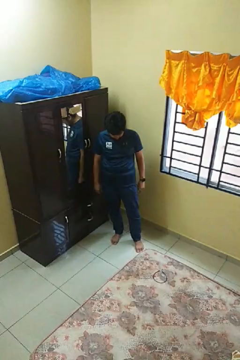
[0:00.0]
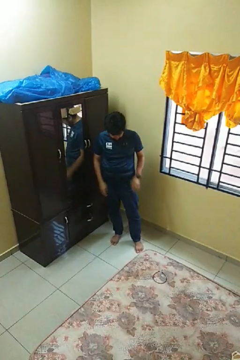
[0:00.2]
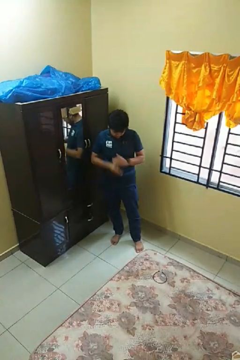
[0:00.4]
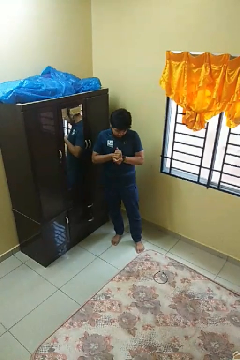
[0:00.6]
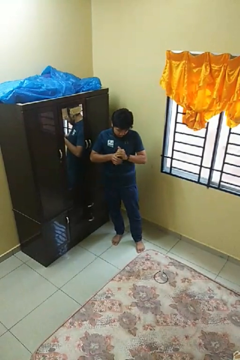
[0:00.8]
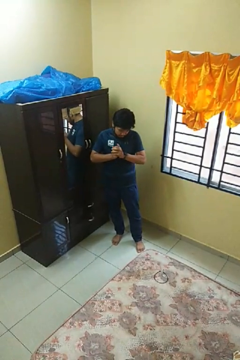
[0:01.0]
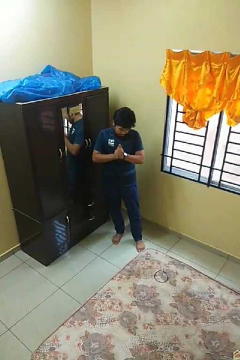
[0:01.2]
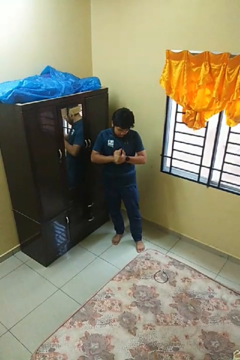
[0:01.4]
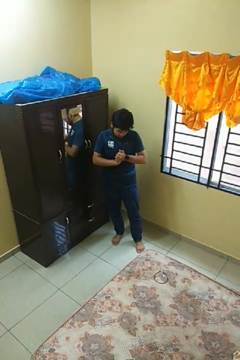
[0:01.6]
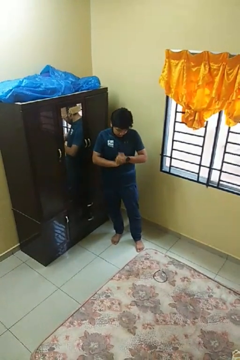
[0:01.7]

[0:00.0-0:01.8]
person cracks knuckles

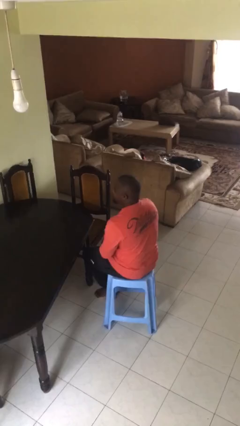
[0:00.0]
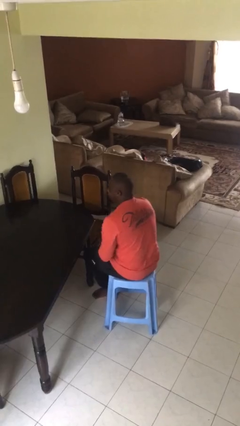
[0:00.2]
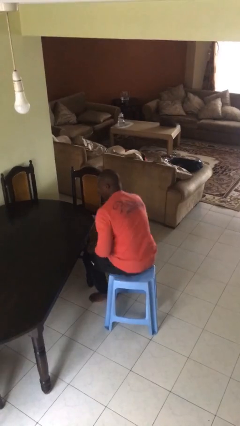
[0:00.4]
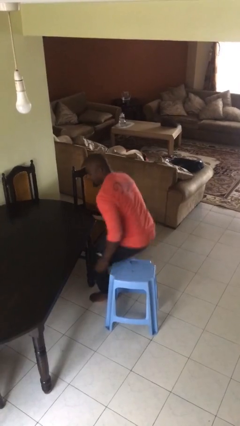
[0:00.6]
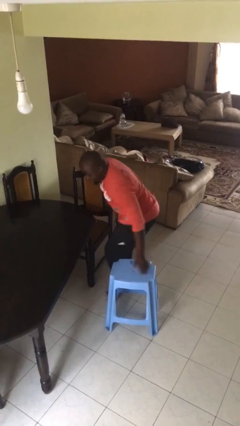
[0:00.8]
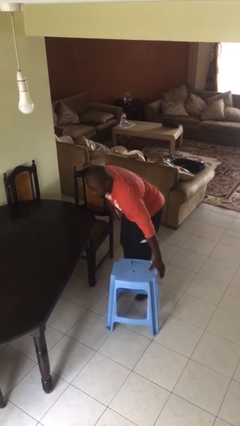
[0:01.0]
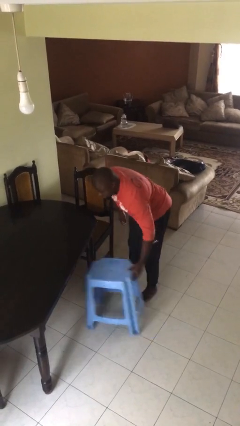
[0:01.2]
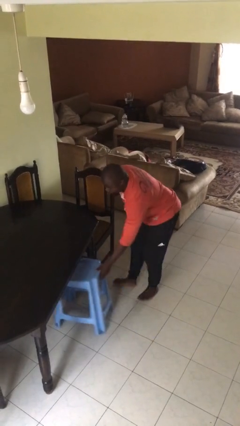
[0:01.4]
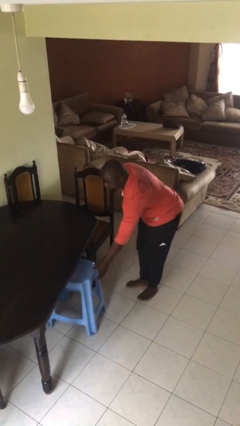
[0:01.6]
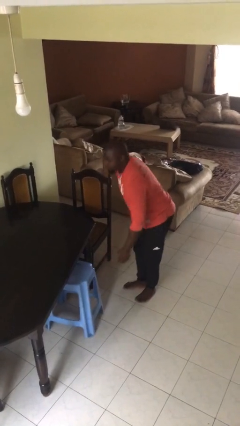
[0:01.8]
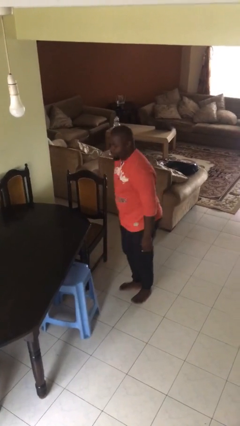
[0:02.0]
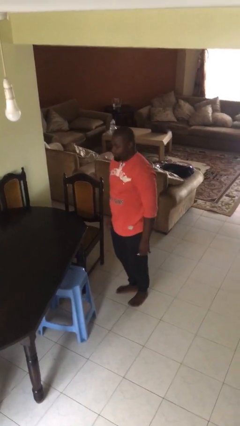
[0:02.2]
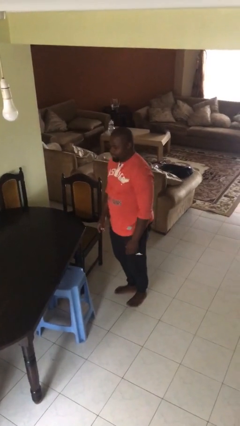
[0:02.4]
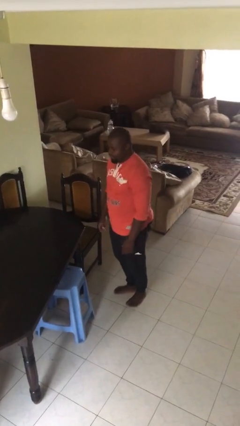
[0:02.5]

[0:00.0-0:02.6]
person stands up

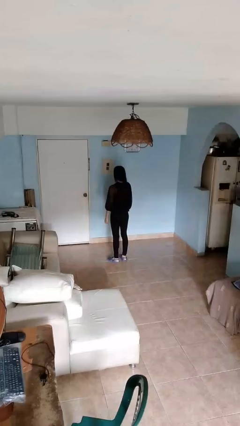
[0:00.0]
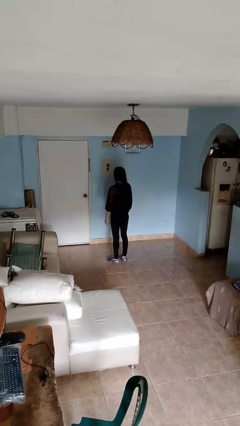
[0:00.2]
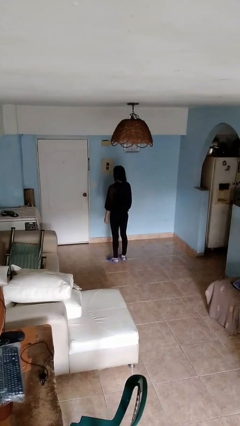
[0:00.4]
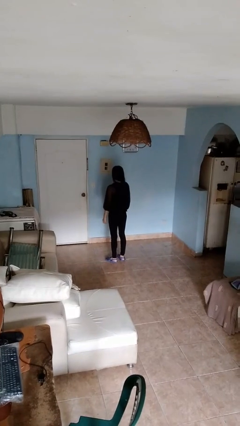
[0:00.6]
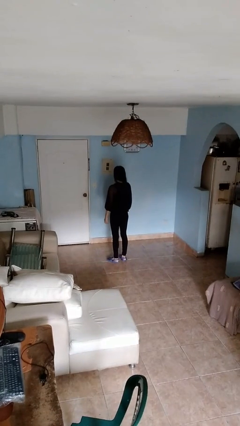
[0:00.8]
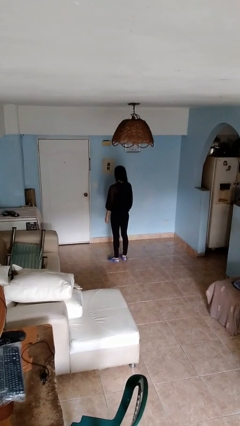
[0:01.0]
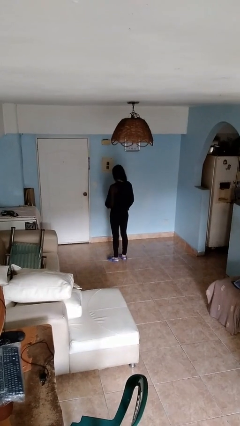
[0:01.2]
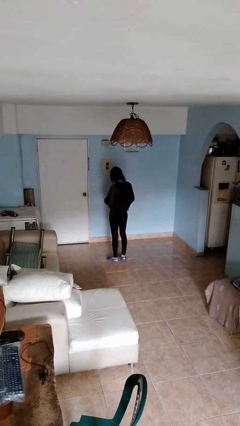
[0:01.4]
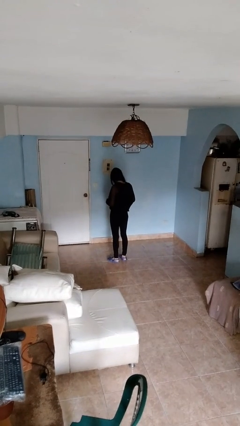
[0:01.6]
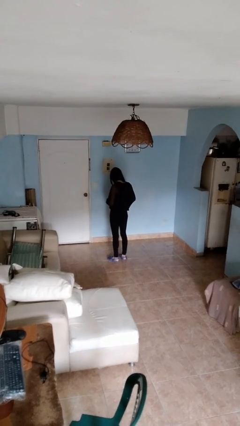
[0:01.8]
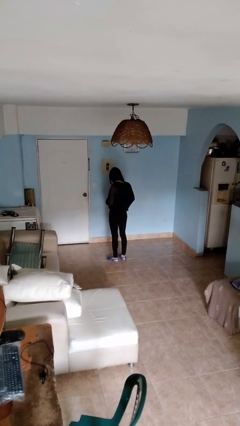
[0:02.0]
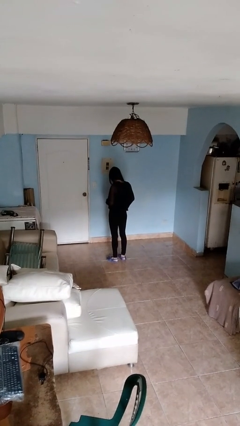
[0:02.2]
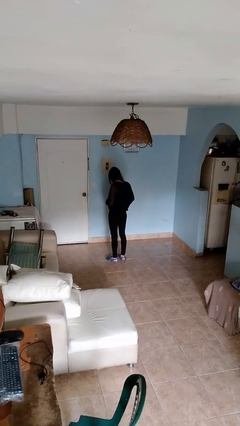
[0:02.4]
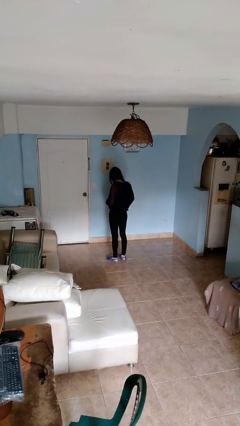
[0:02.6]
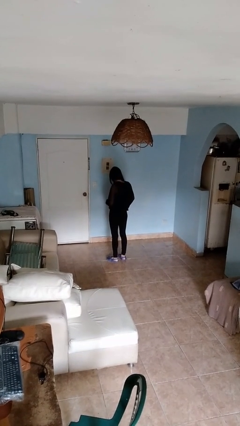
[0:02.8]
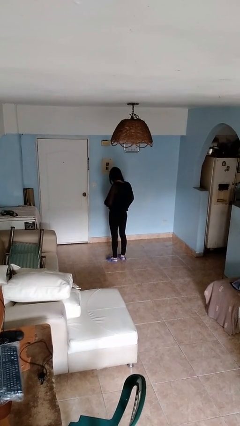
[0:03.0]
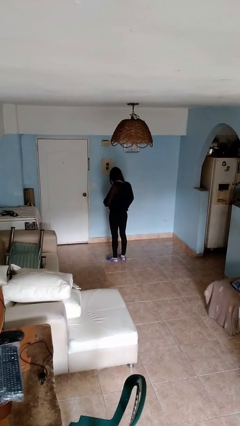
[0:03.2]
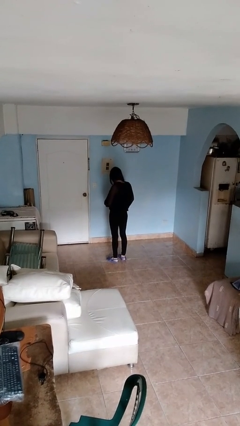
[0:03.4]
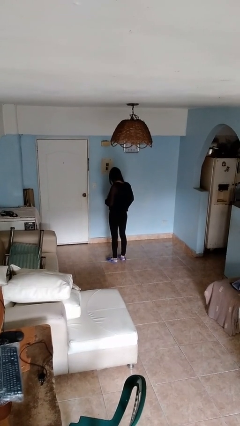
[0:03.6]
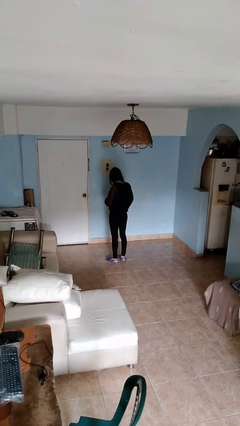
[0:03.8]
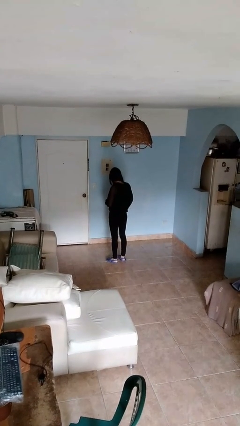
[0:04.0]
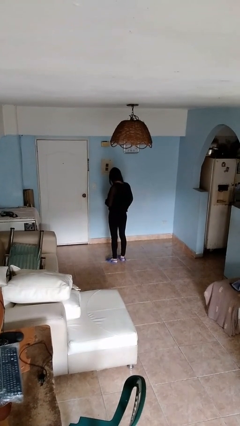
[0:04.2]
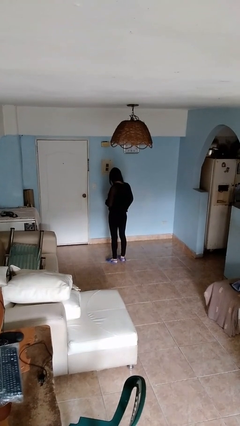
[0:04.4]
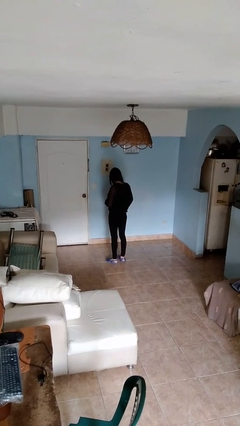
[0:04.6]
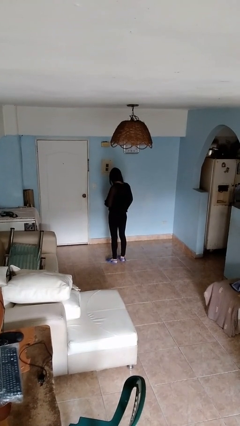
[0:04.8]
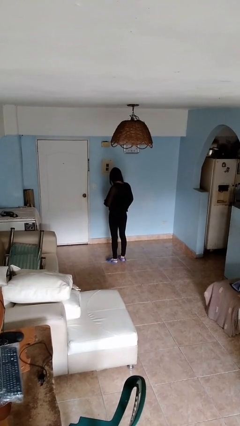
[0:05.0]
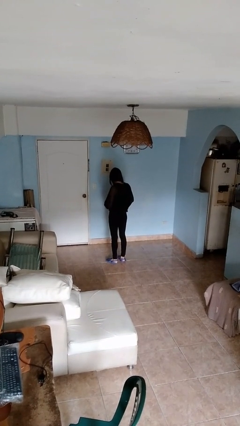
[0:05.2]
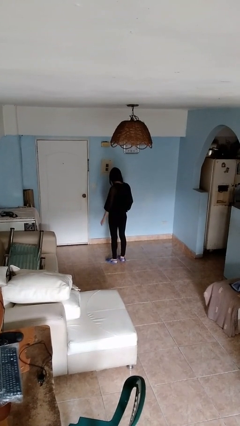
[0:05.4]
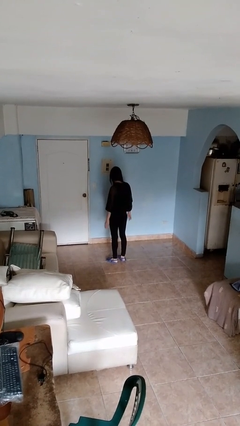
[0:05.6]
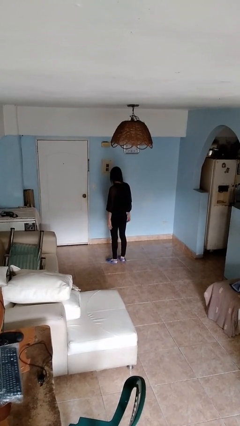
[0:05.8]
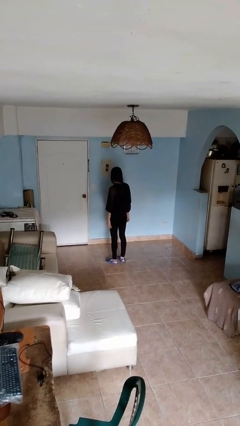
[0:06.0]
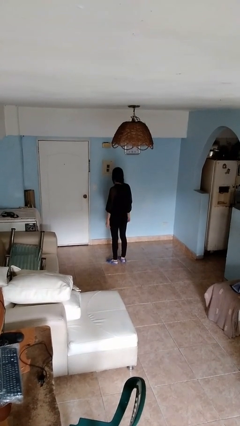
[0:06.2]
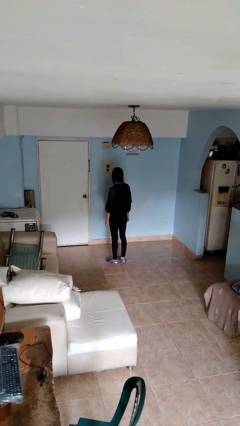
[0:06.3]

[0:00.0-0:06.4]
person unbuttons shirt

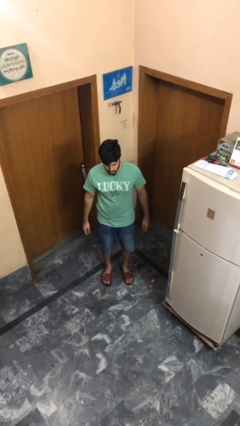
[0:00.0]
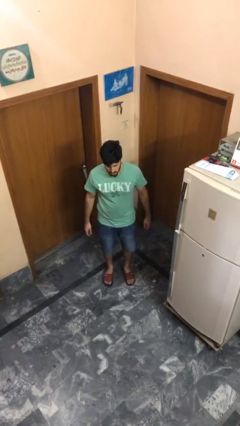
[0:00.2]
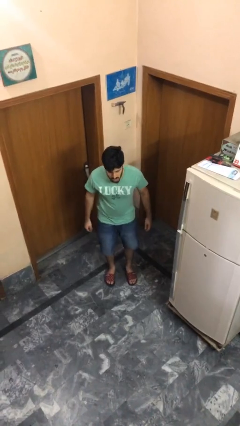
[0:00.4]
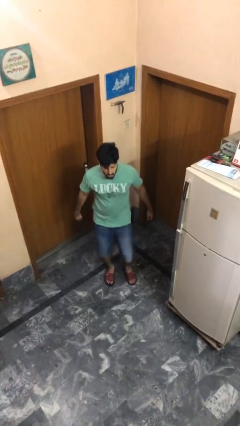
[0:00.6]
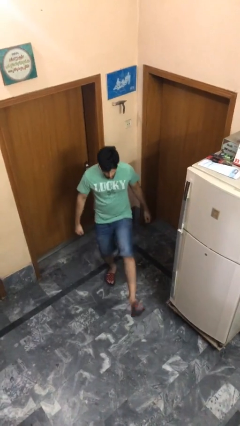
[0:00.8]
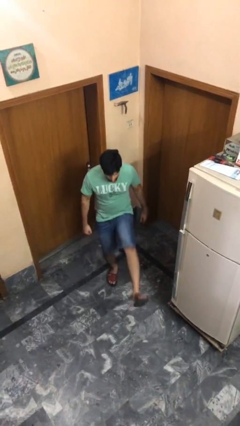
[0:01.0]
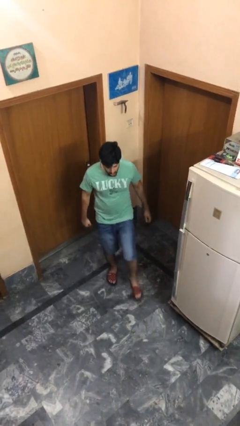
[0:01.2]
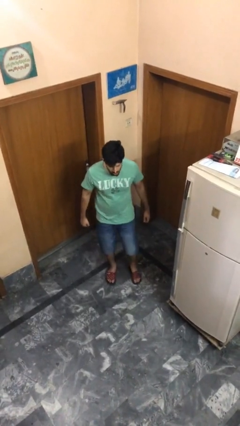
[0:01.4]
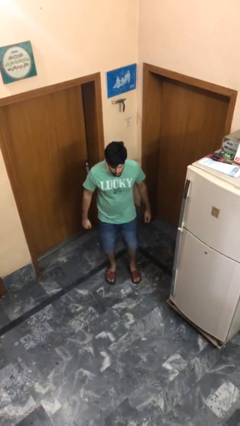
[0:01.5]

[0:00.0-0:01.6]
person karate kicks

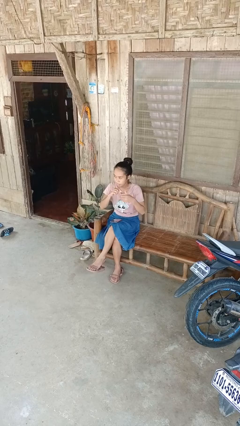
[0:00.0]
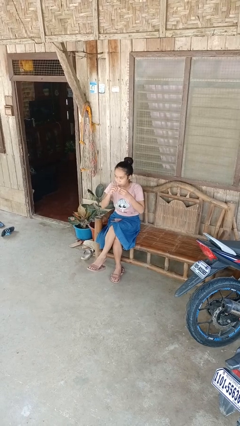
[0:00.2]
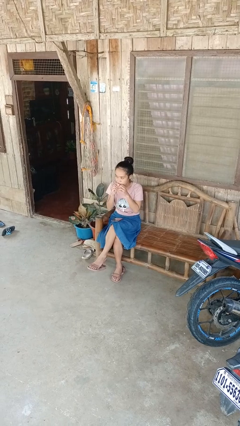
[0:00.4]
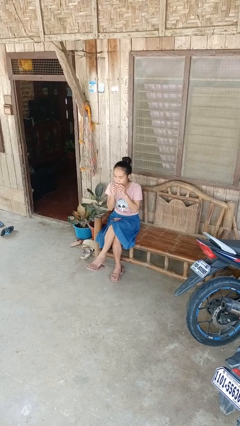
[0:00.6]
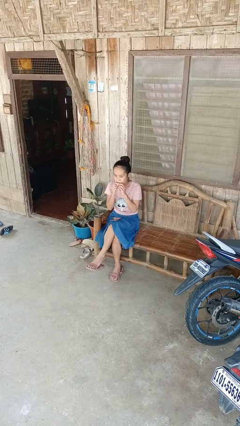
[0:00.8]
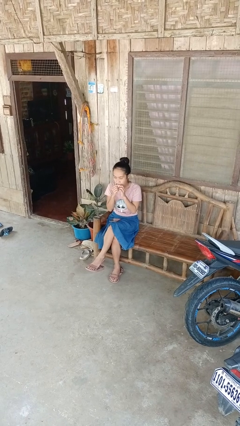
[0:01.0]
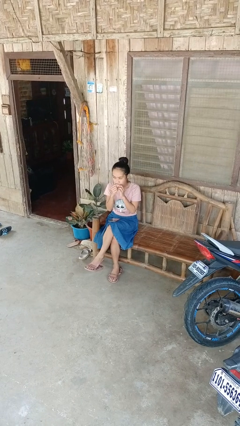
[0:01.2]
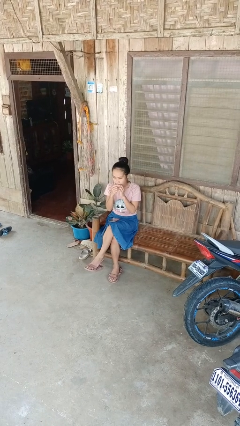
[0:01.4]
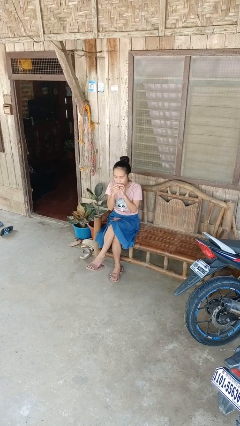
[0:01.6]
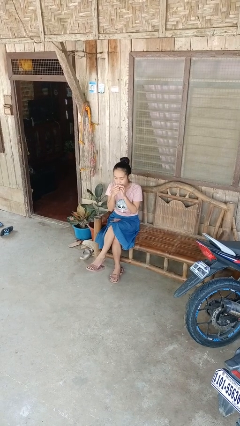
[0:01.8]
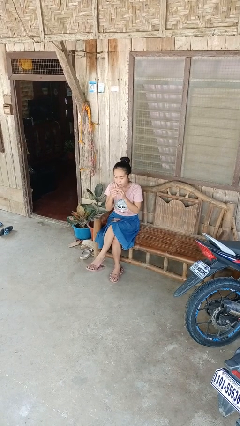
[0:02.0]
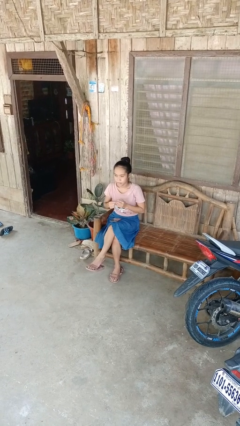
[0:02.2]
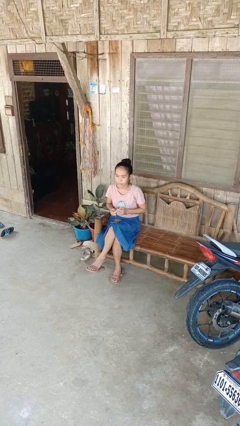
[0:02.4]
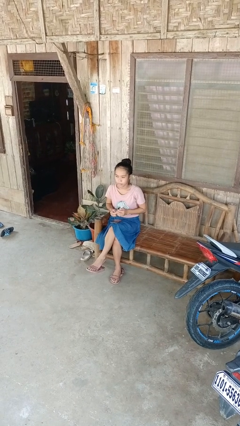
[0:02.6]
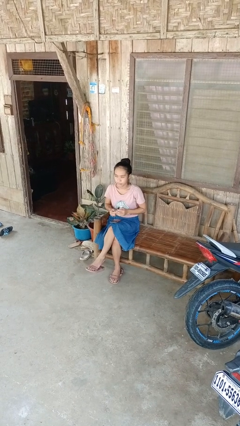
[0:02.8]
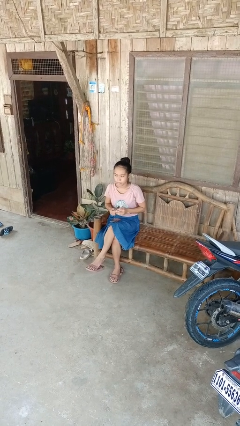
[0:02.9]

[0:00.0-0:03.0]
person flosses

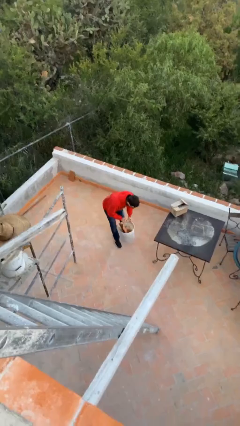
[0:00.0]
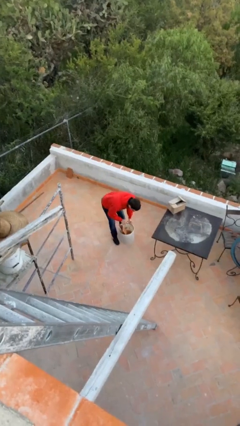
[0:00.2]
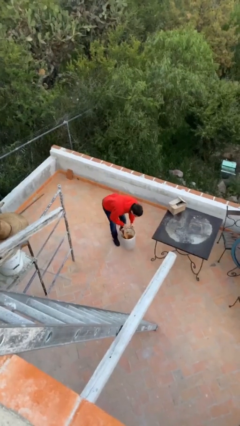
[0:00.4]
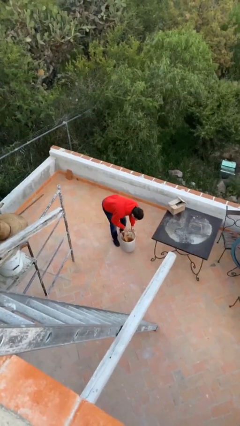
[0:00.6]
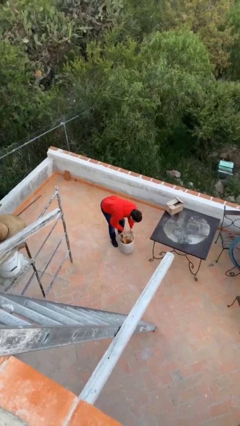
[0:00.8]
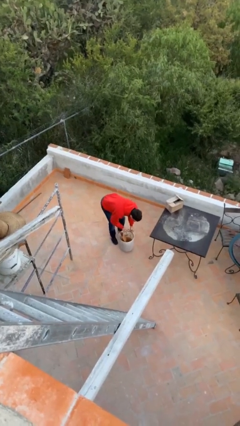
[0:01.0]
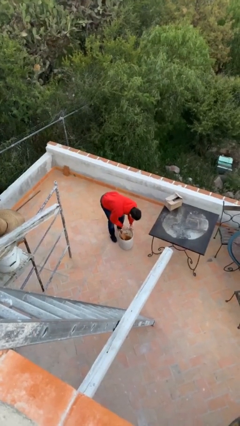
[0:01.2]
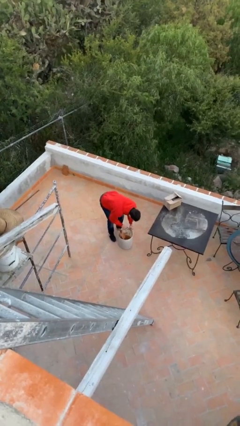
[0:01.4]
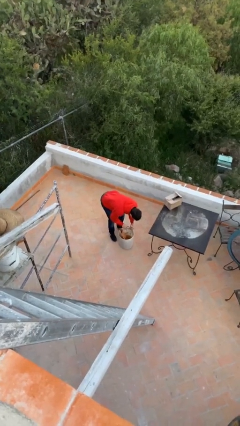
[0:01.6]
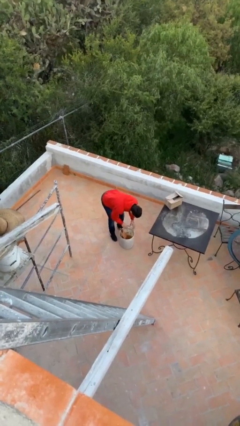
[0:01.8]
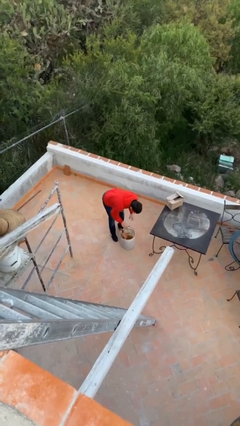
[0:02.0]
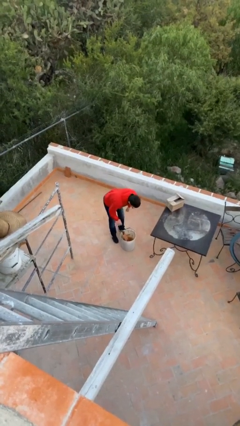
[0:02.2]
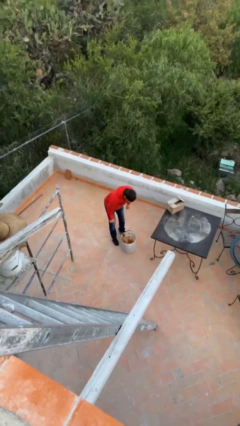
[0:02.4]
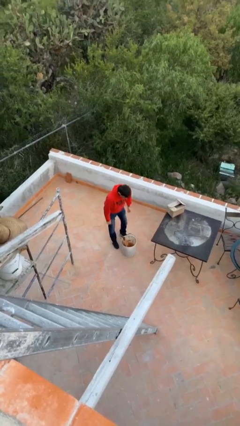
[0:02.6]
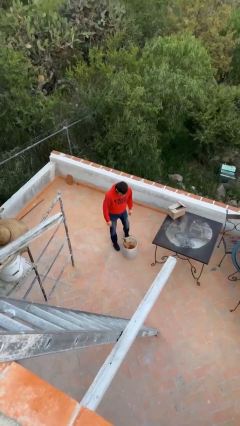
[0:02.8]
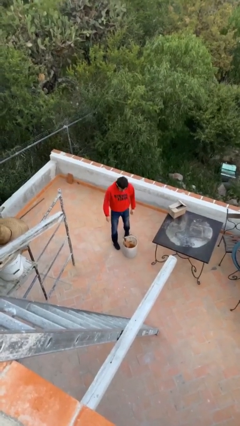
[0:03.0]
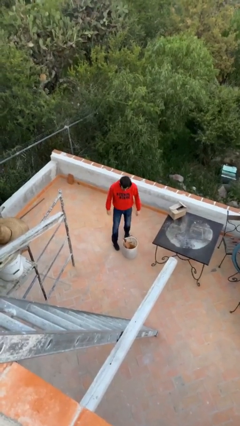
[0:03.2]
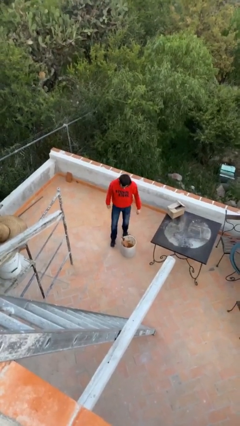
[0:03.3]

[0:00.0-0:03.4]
person puts down object on floor